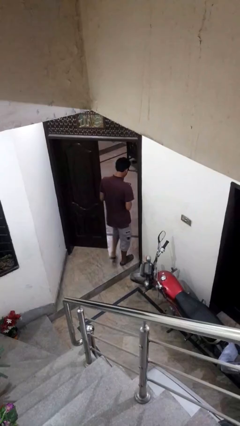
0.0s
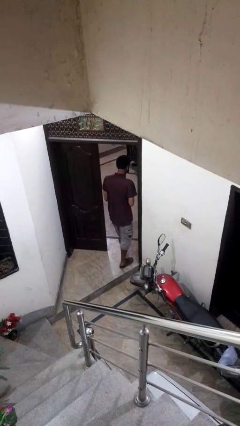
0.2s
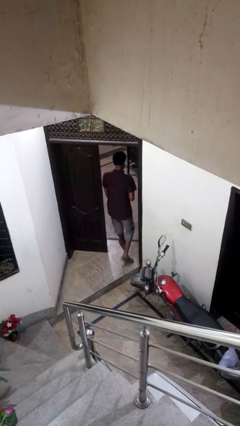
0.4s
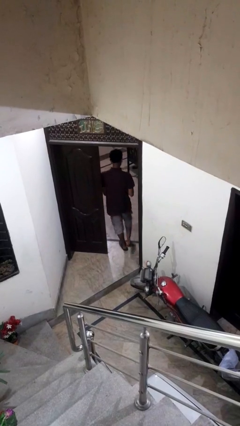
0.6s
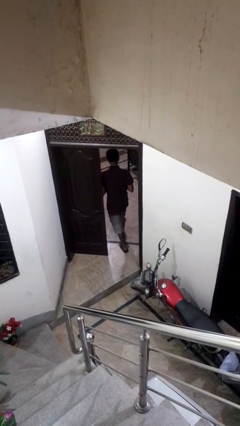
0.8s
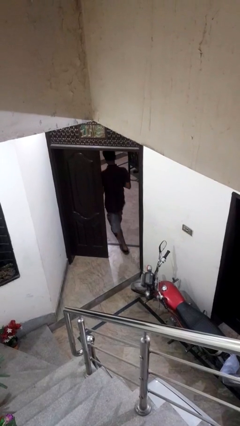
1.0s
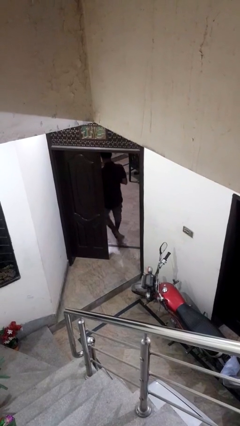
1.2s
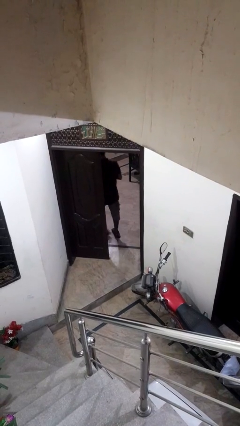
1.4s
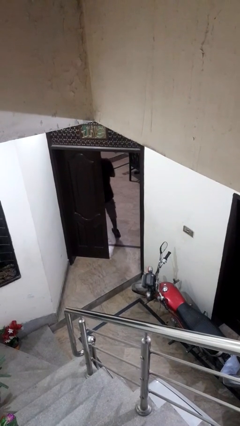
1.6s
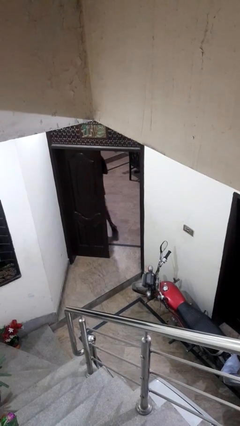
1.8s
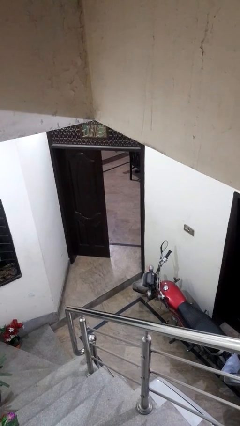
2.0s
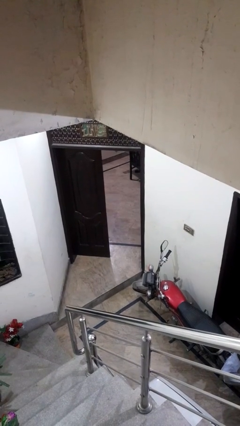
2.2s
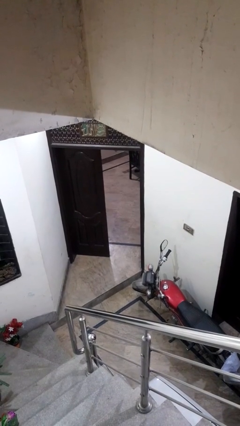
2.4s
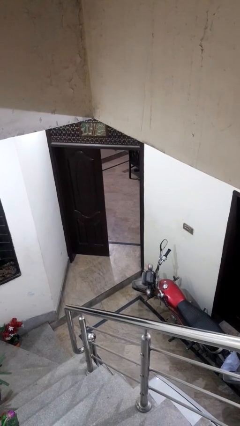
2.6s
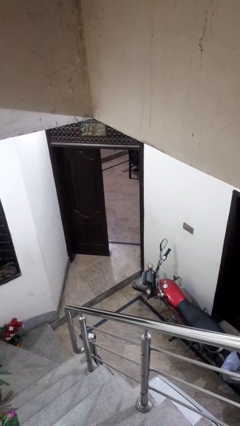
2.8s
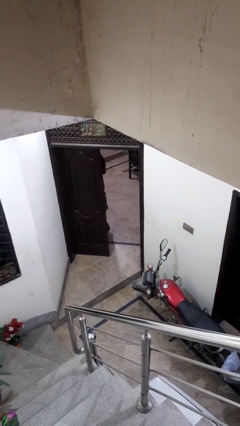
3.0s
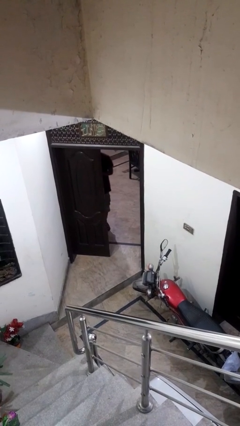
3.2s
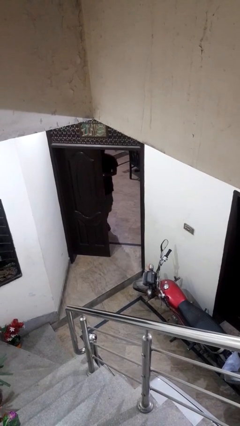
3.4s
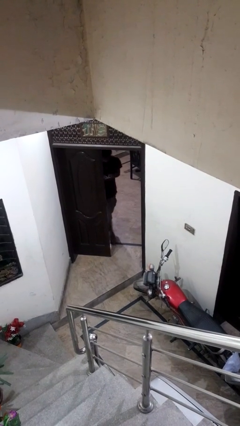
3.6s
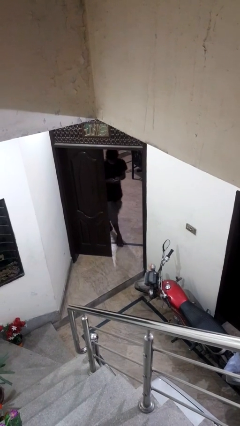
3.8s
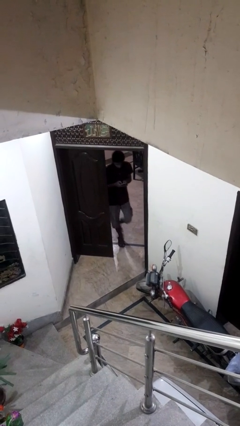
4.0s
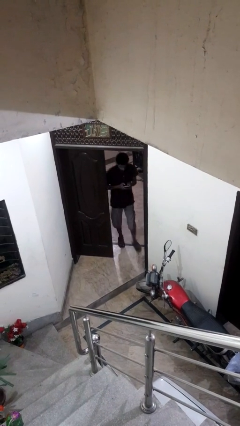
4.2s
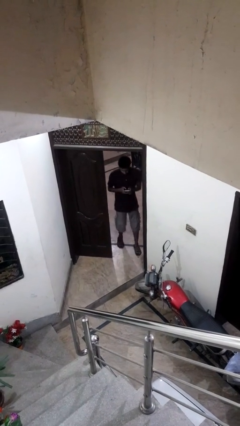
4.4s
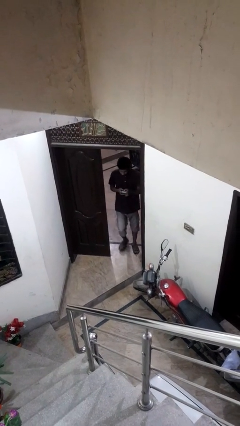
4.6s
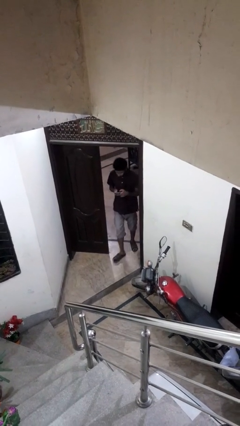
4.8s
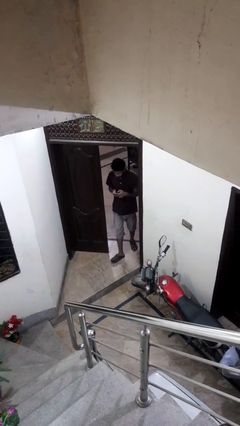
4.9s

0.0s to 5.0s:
person exits scene through structure

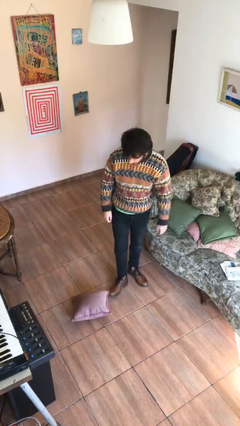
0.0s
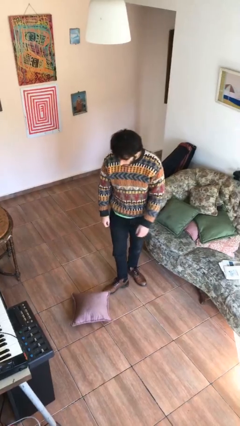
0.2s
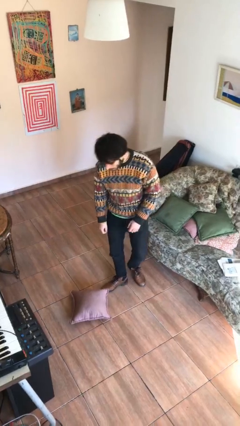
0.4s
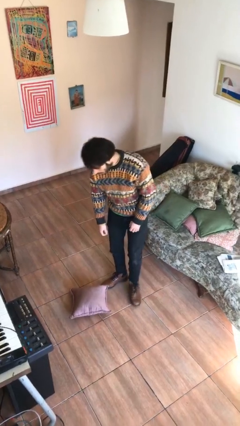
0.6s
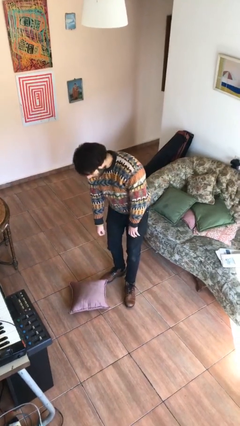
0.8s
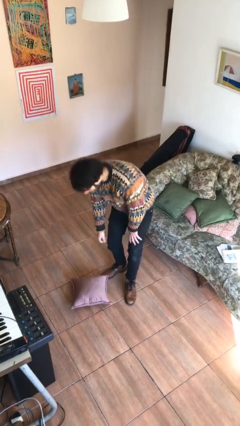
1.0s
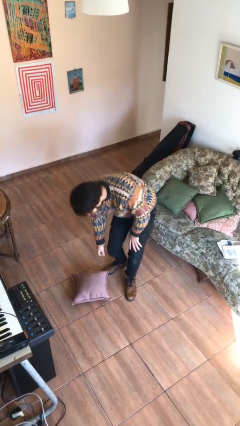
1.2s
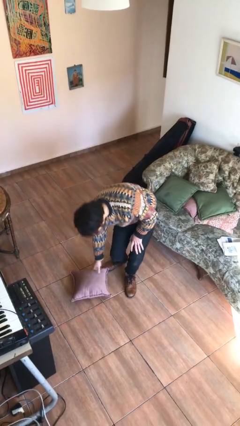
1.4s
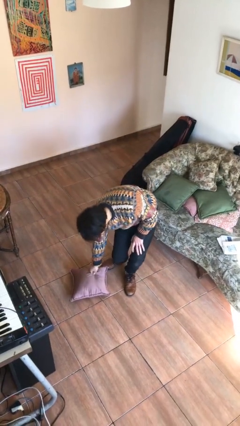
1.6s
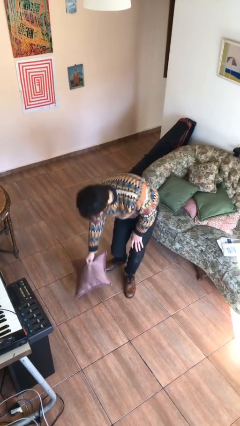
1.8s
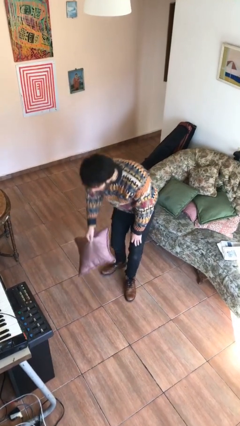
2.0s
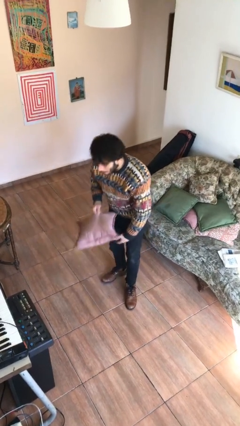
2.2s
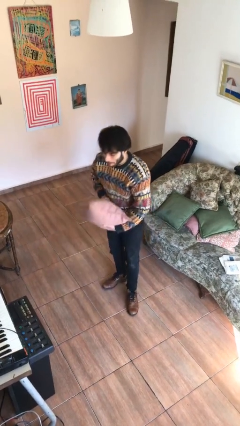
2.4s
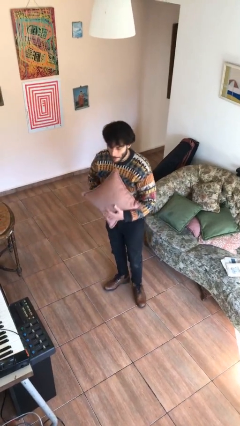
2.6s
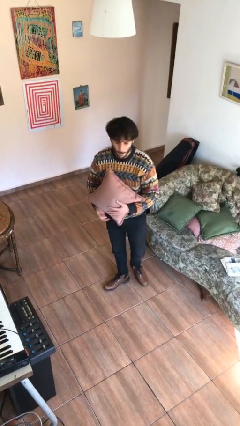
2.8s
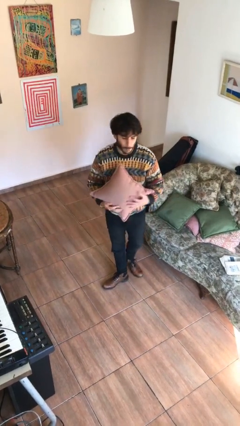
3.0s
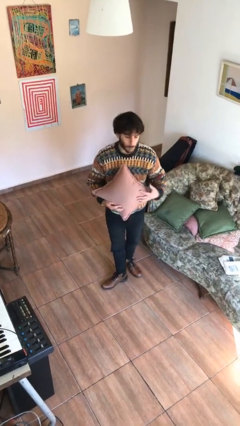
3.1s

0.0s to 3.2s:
person picks up object from floor

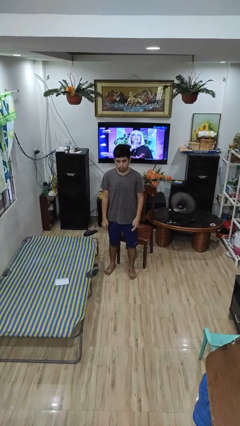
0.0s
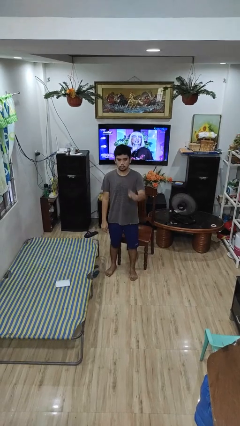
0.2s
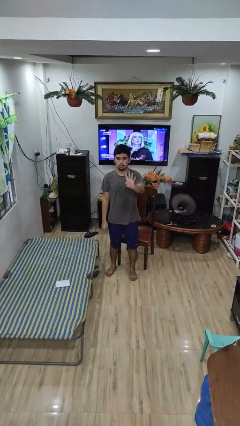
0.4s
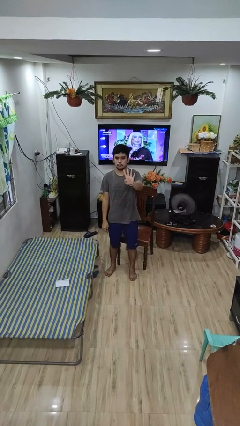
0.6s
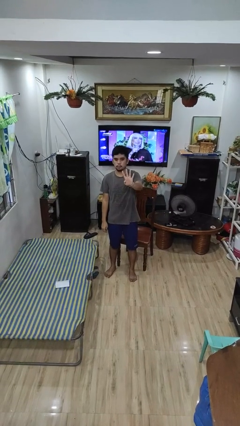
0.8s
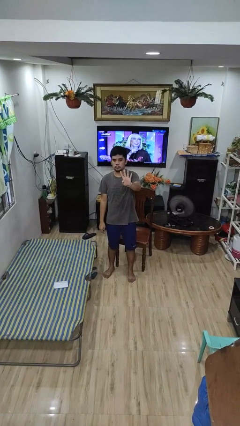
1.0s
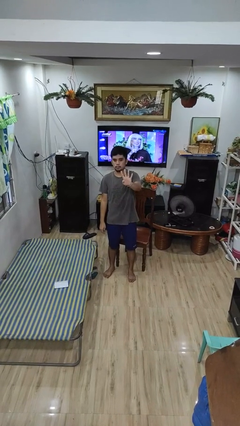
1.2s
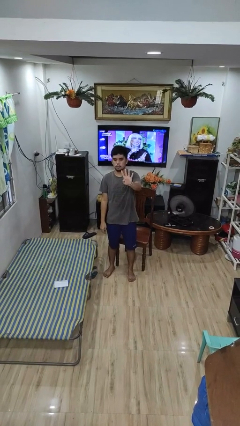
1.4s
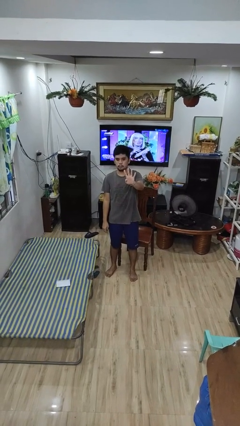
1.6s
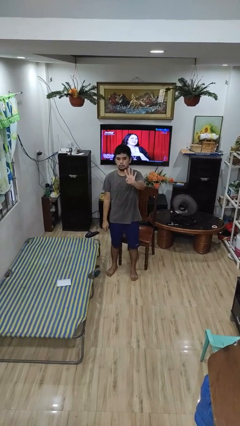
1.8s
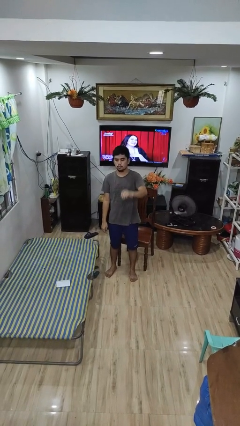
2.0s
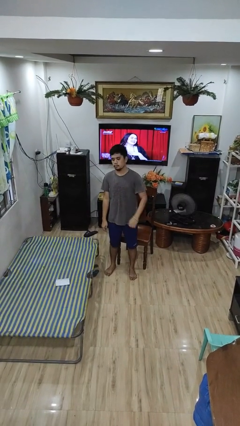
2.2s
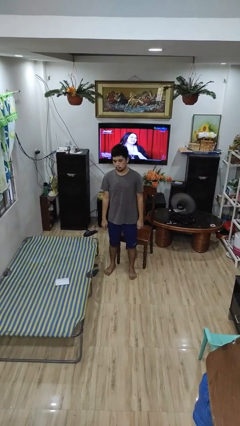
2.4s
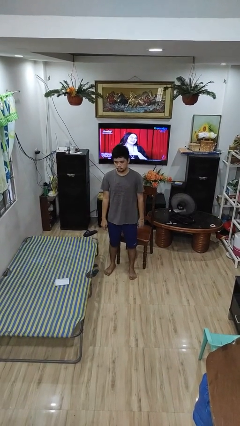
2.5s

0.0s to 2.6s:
person gestures number four

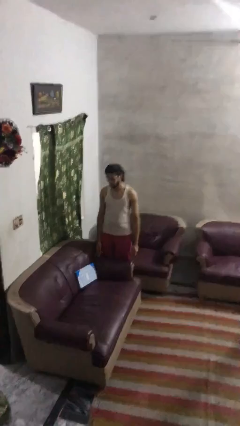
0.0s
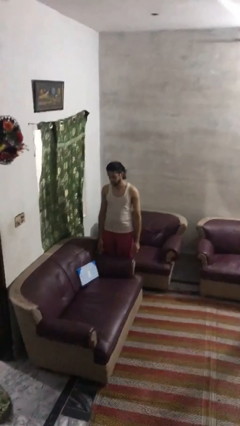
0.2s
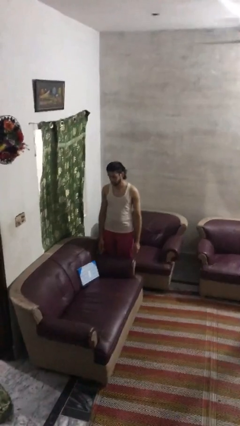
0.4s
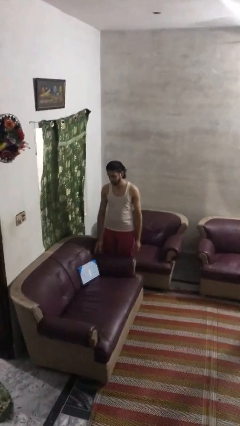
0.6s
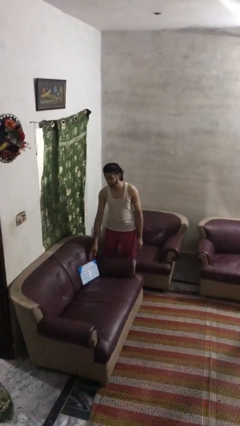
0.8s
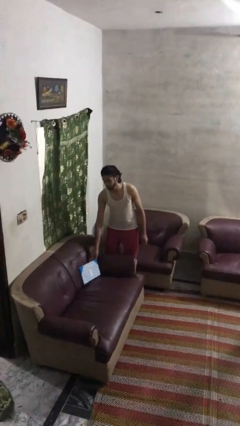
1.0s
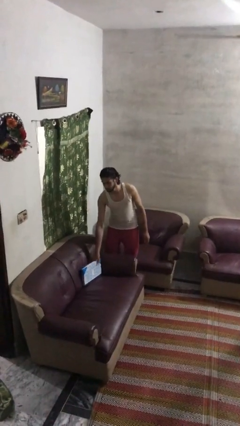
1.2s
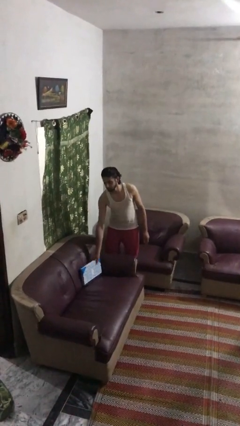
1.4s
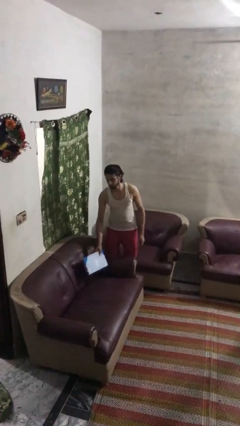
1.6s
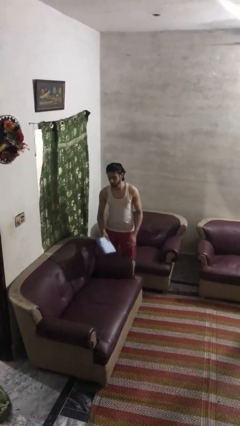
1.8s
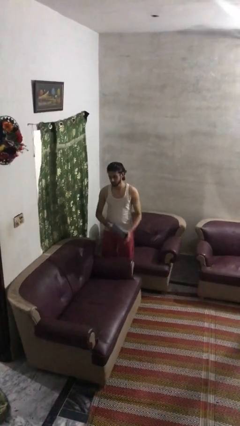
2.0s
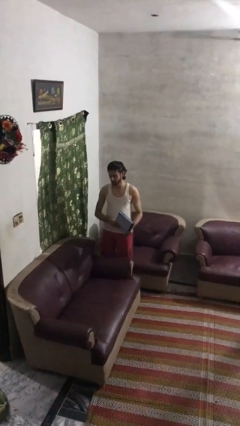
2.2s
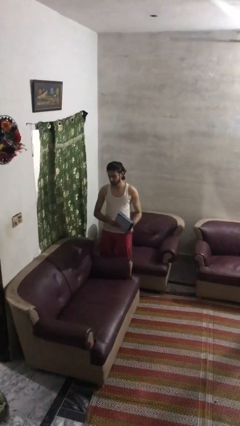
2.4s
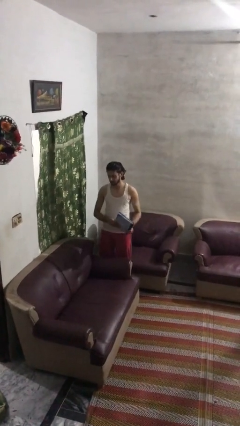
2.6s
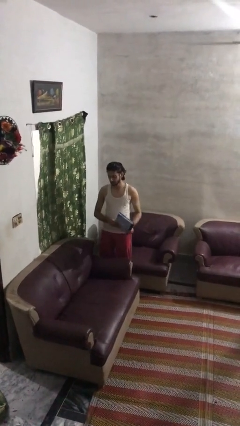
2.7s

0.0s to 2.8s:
person picks up object from couch

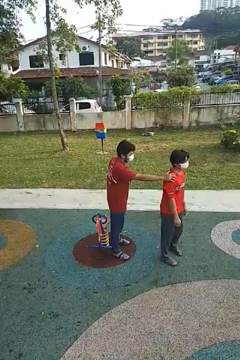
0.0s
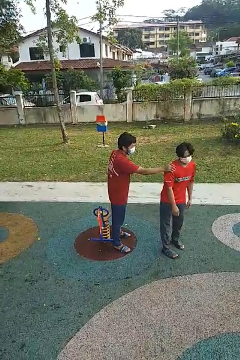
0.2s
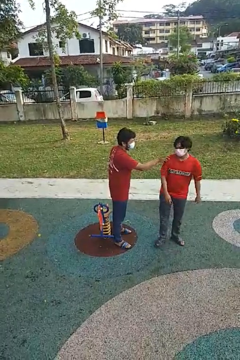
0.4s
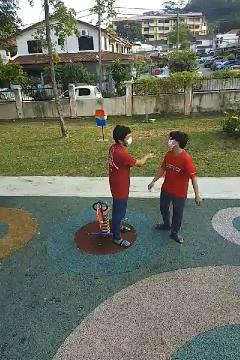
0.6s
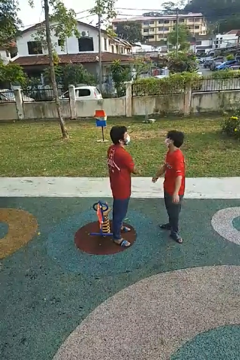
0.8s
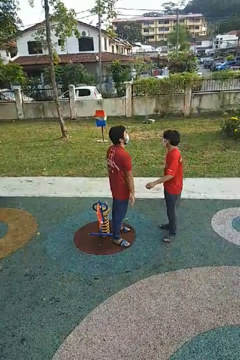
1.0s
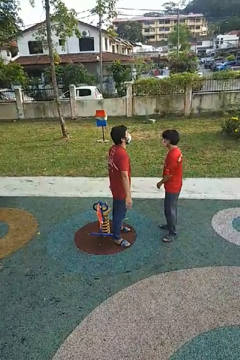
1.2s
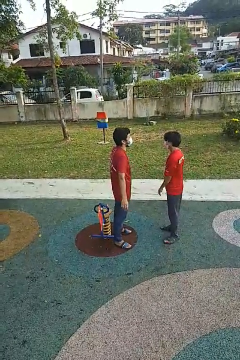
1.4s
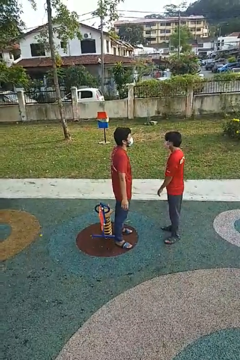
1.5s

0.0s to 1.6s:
person spins person around

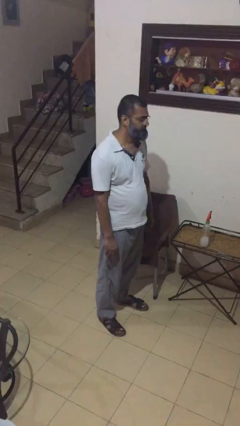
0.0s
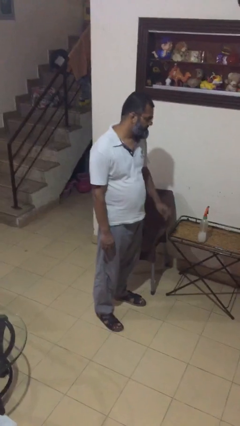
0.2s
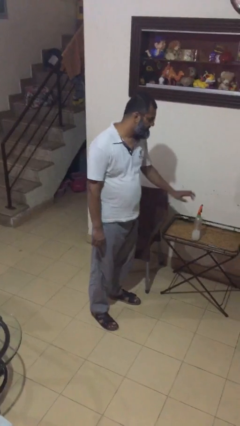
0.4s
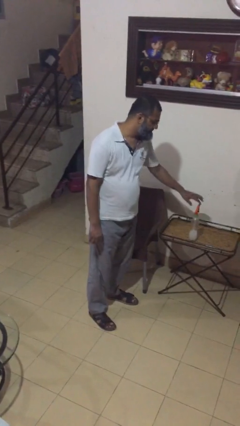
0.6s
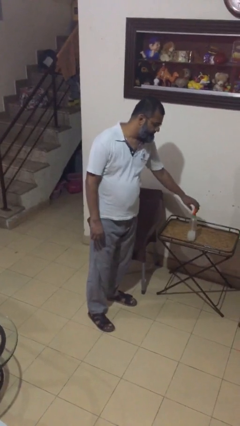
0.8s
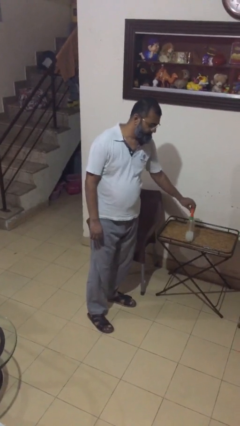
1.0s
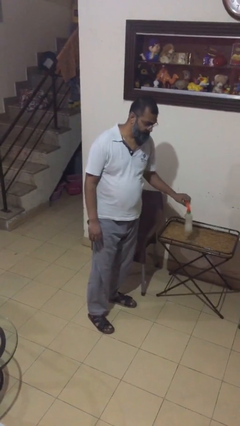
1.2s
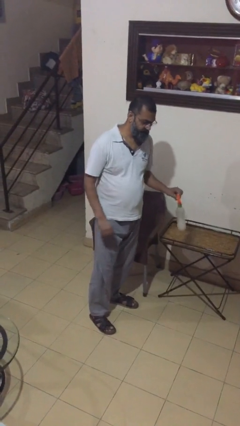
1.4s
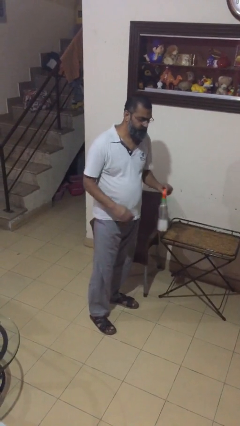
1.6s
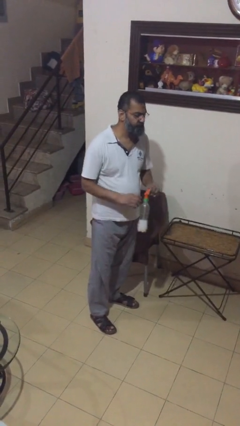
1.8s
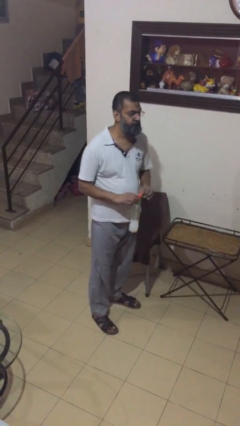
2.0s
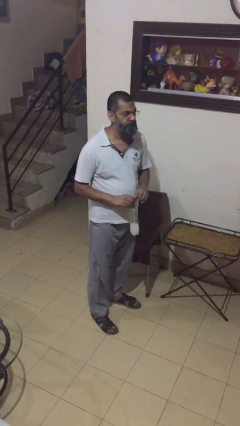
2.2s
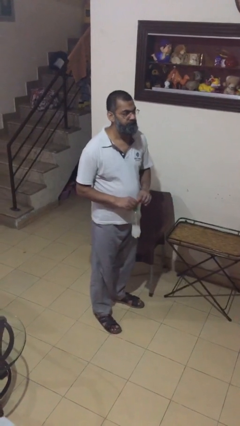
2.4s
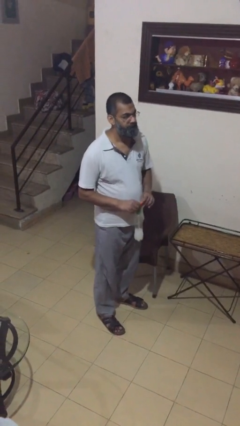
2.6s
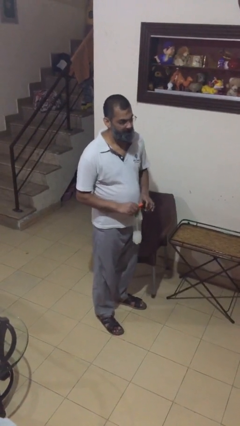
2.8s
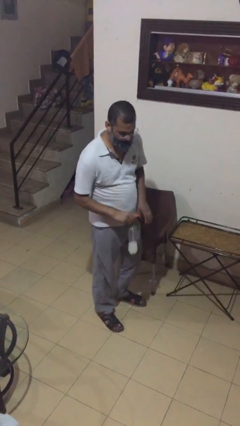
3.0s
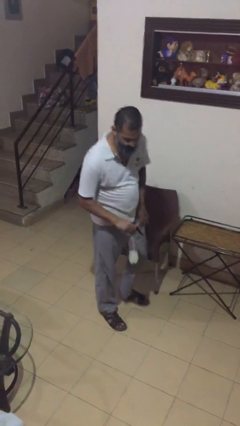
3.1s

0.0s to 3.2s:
person picks up object from table
